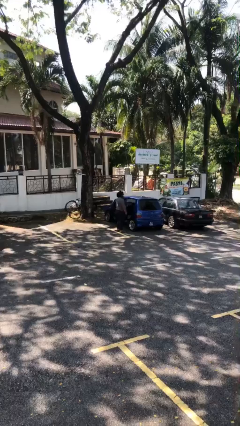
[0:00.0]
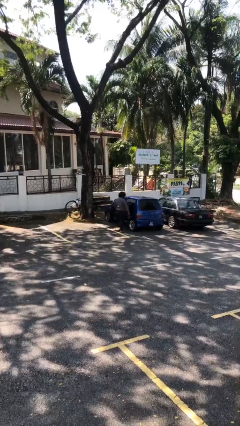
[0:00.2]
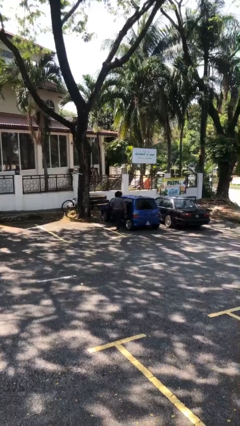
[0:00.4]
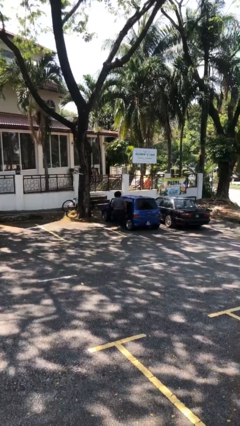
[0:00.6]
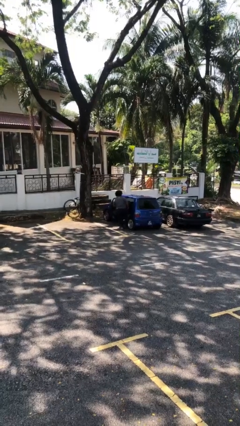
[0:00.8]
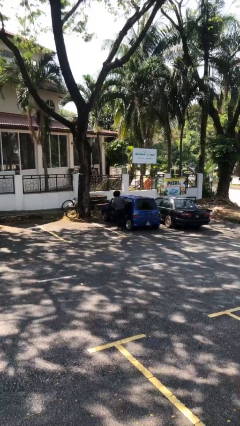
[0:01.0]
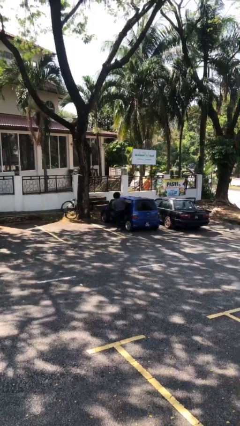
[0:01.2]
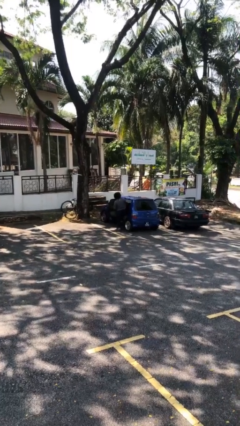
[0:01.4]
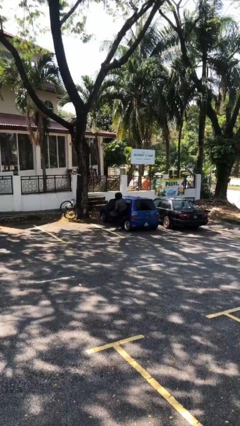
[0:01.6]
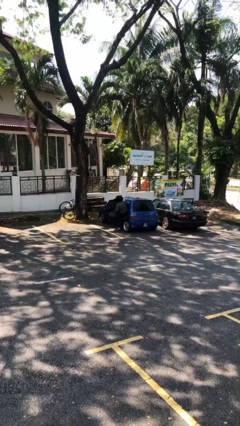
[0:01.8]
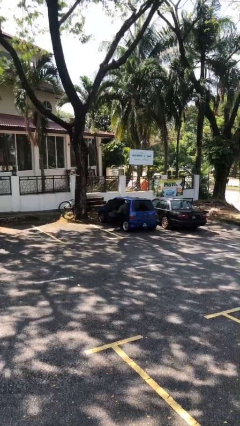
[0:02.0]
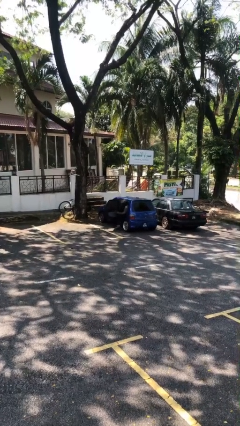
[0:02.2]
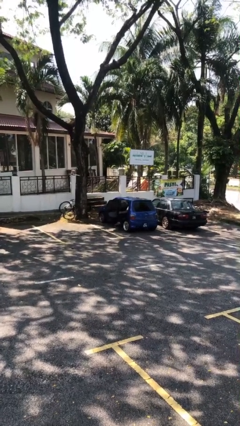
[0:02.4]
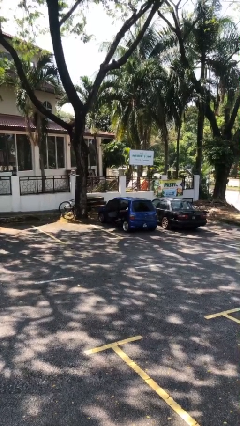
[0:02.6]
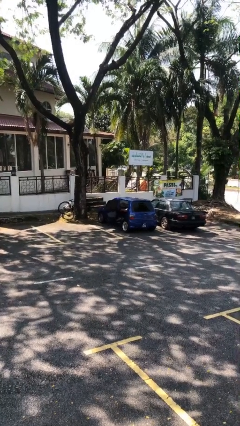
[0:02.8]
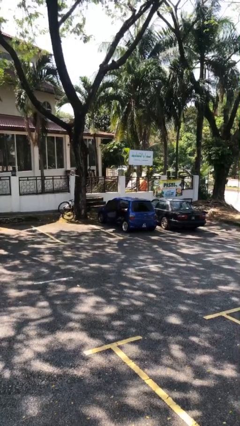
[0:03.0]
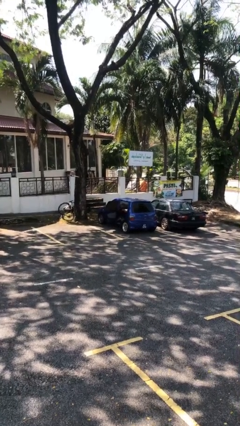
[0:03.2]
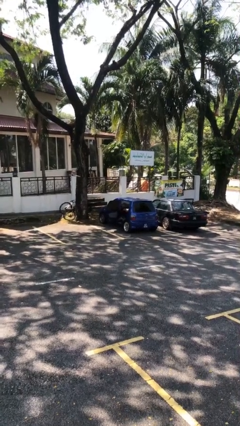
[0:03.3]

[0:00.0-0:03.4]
person enters car

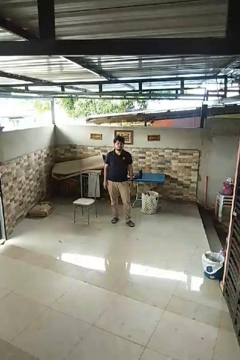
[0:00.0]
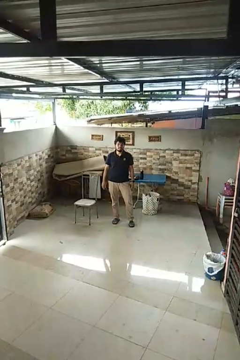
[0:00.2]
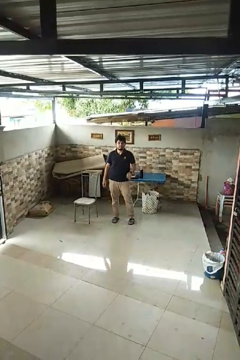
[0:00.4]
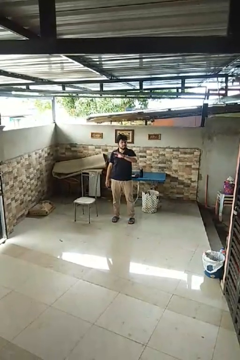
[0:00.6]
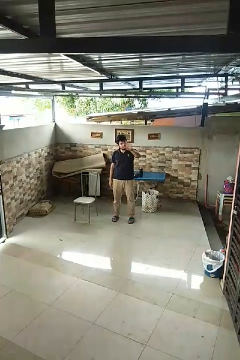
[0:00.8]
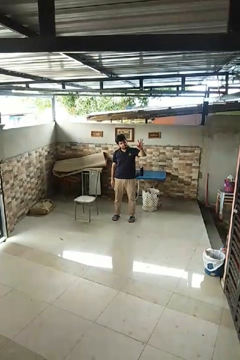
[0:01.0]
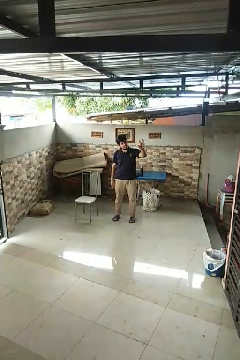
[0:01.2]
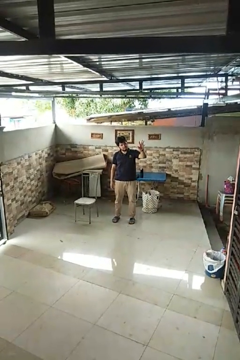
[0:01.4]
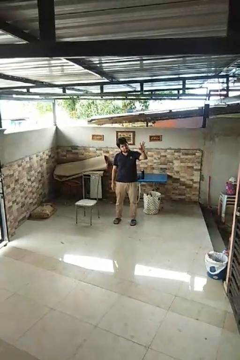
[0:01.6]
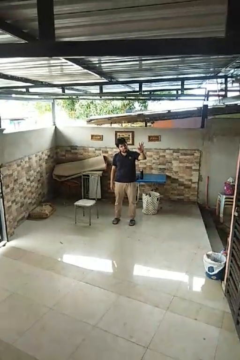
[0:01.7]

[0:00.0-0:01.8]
person gestures swipe left

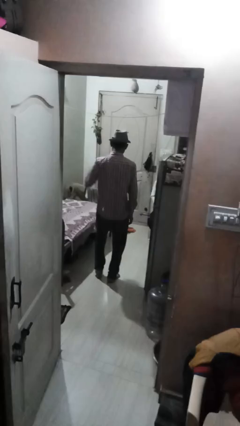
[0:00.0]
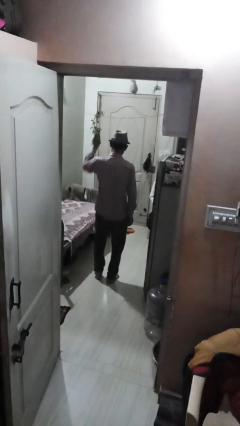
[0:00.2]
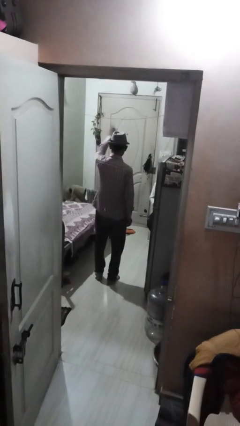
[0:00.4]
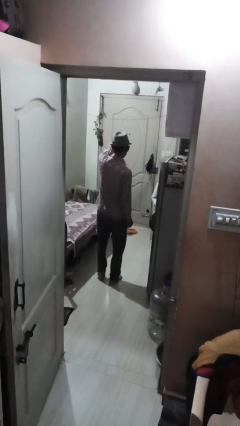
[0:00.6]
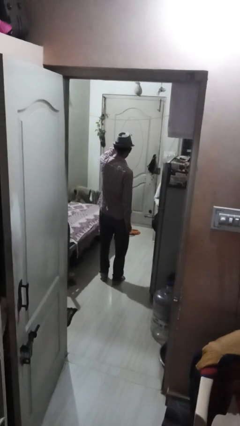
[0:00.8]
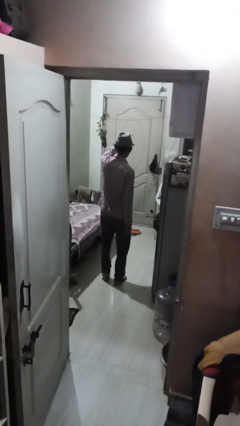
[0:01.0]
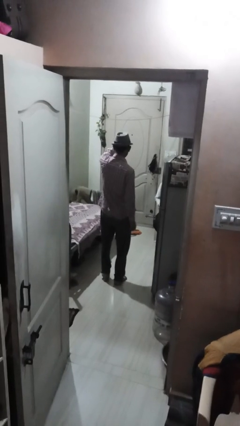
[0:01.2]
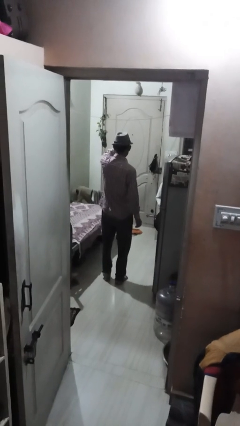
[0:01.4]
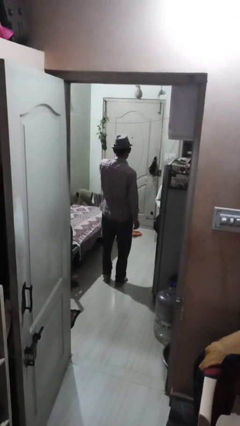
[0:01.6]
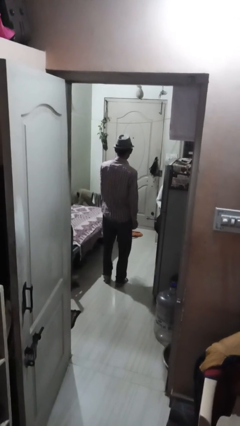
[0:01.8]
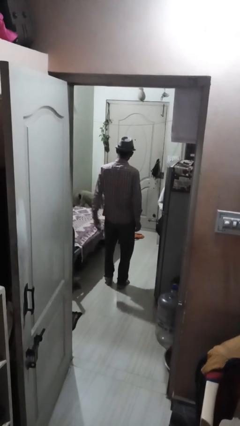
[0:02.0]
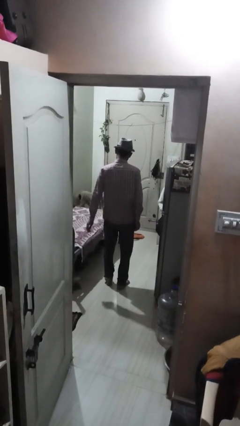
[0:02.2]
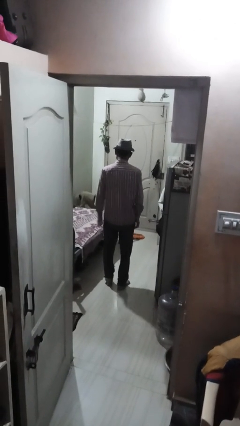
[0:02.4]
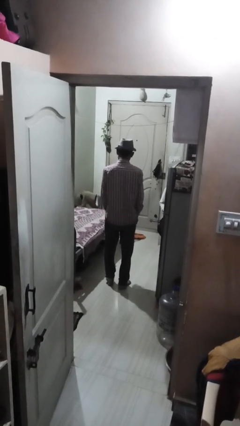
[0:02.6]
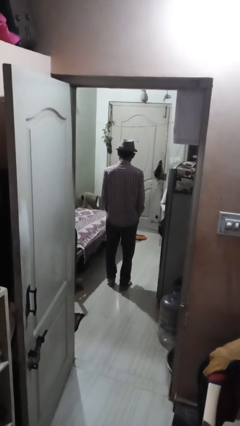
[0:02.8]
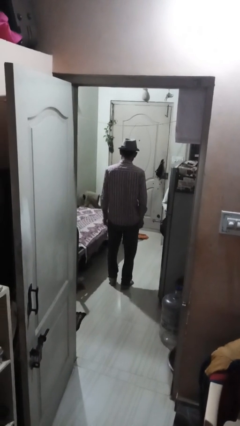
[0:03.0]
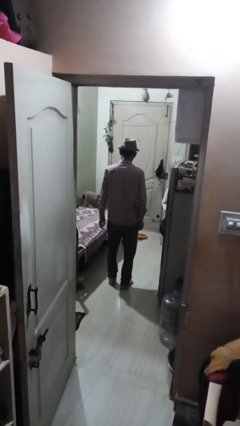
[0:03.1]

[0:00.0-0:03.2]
person points at person

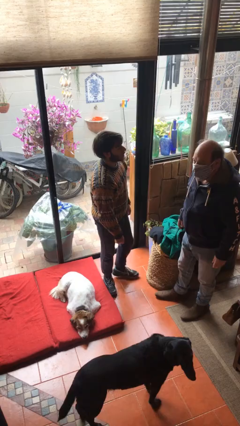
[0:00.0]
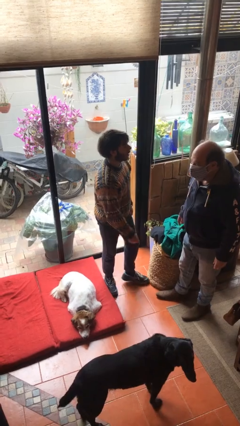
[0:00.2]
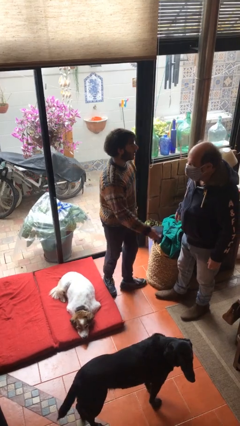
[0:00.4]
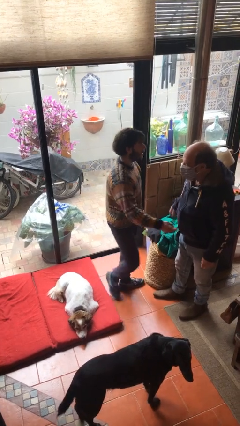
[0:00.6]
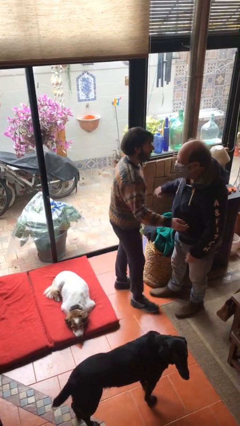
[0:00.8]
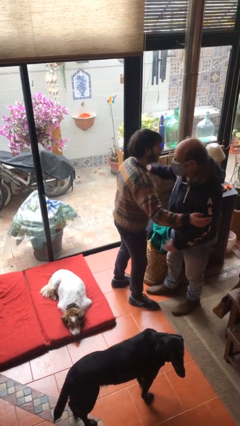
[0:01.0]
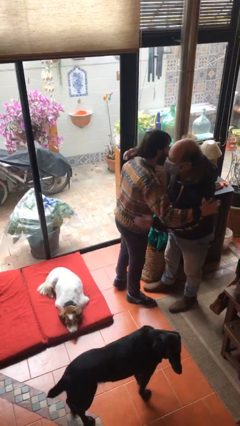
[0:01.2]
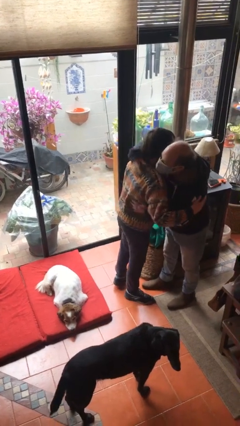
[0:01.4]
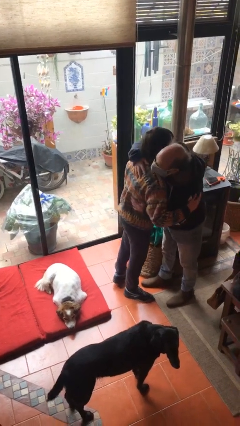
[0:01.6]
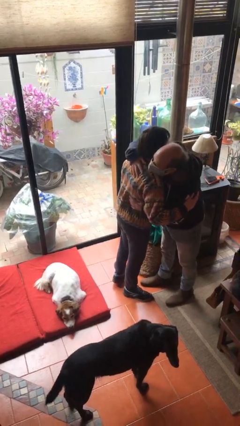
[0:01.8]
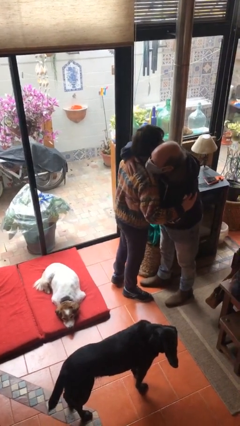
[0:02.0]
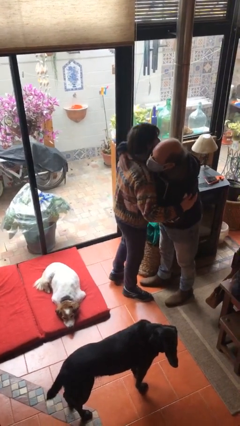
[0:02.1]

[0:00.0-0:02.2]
person kisses cheek of person

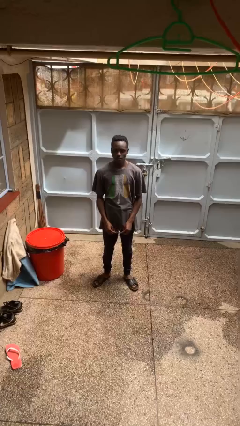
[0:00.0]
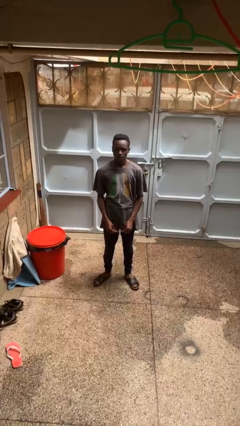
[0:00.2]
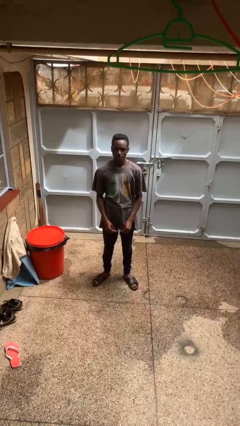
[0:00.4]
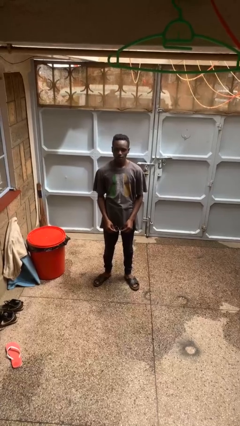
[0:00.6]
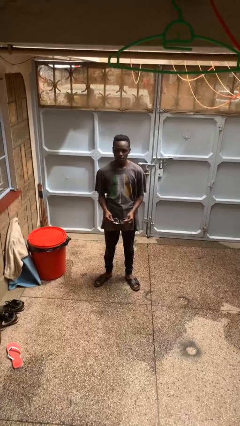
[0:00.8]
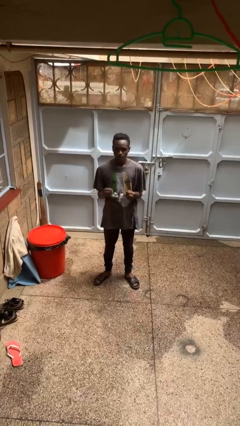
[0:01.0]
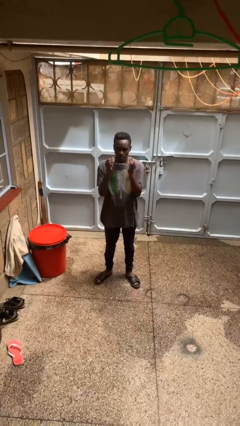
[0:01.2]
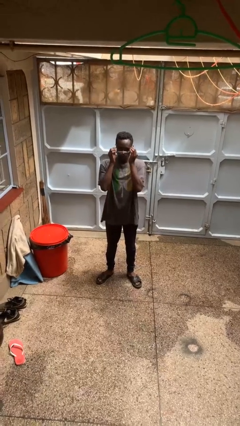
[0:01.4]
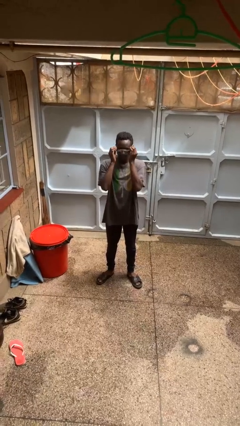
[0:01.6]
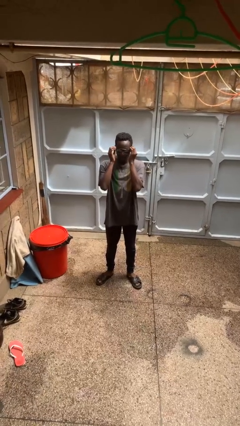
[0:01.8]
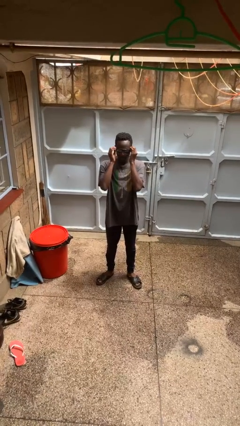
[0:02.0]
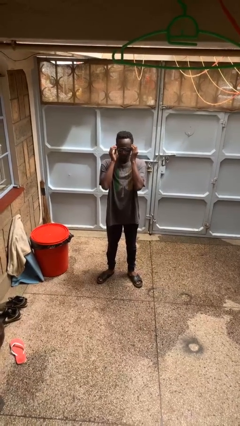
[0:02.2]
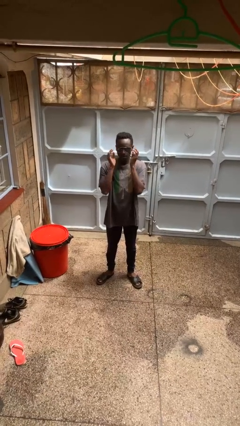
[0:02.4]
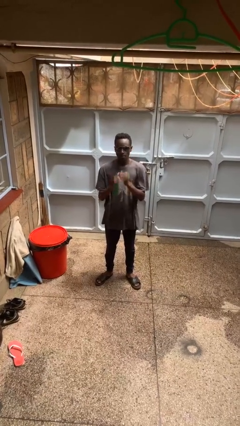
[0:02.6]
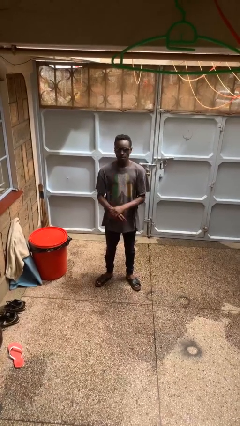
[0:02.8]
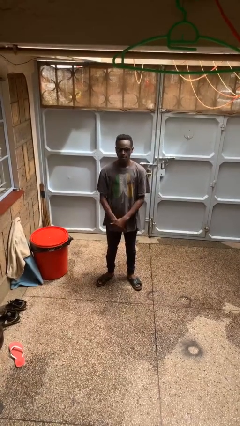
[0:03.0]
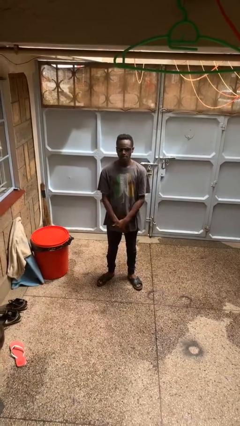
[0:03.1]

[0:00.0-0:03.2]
person puts on sunglasses

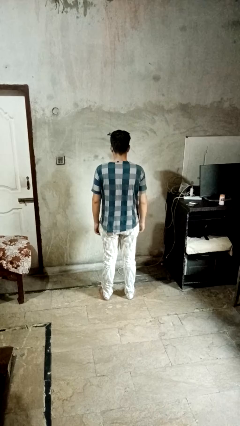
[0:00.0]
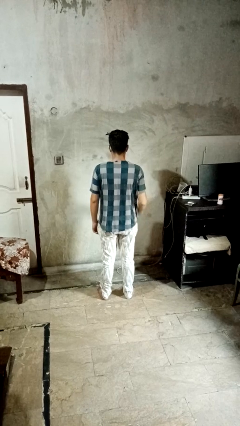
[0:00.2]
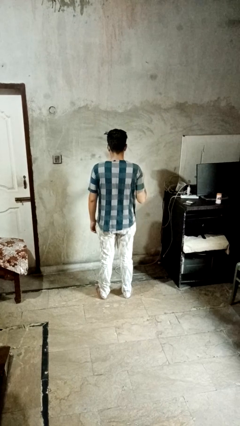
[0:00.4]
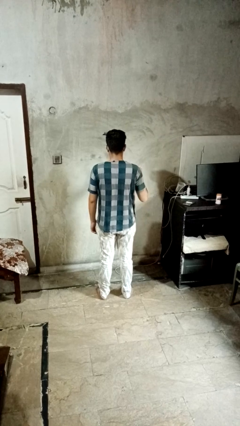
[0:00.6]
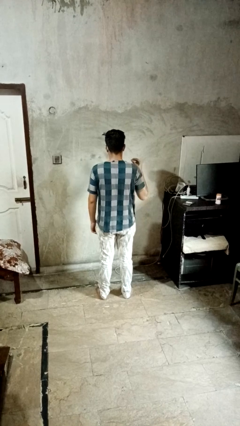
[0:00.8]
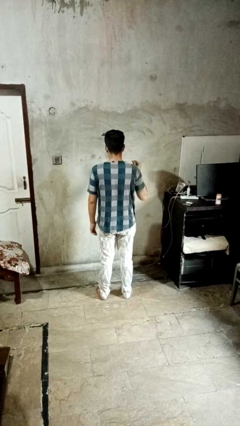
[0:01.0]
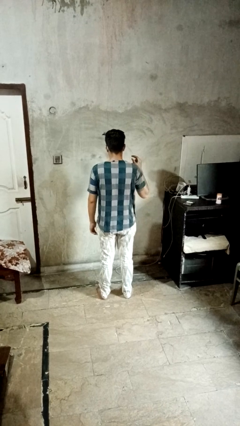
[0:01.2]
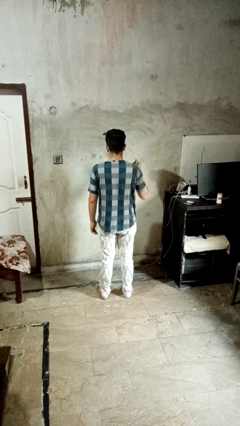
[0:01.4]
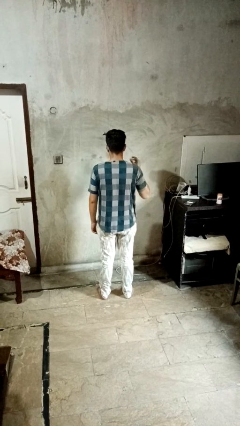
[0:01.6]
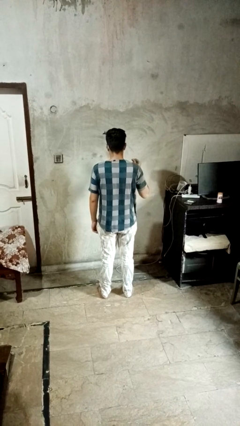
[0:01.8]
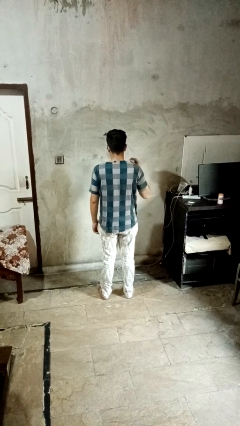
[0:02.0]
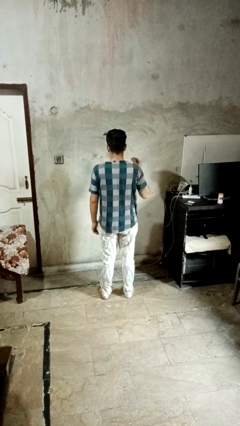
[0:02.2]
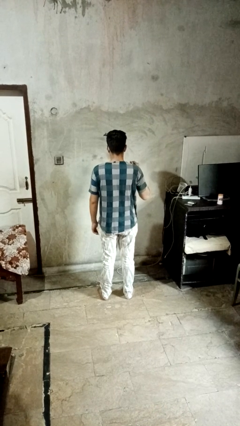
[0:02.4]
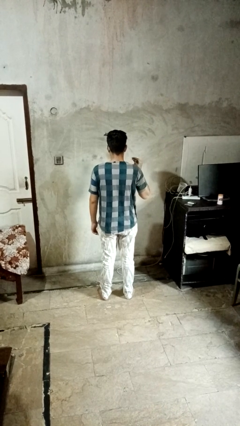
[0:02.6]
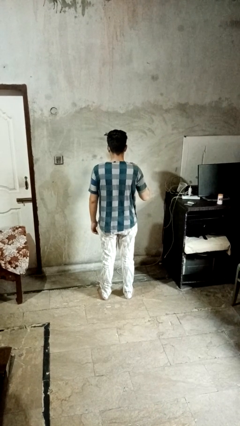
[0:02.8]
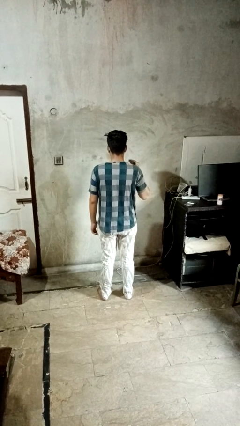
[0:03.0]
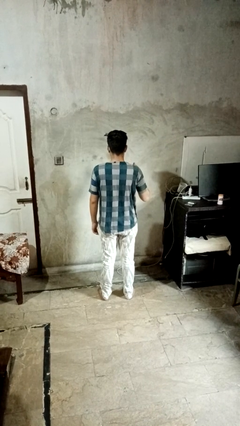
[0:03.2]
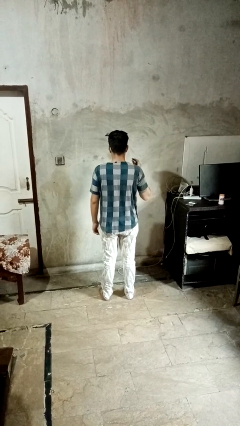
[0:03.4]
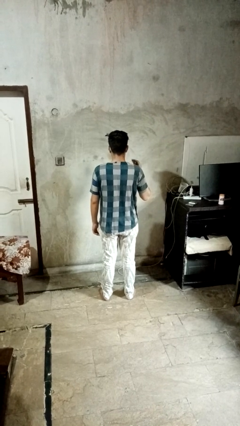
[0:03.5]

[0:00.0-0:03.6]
person snaps fingers
